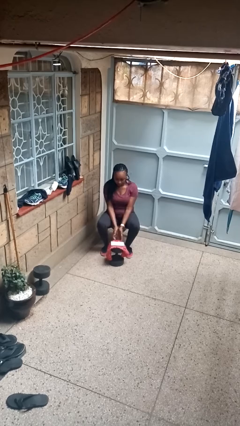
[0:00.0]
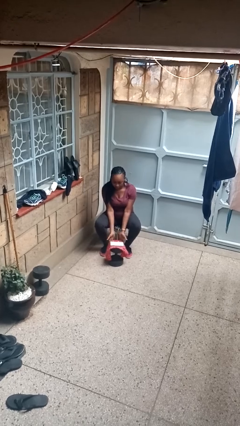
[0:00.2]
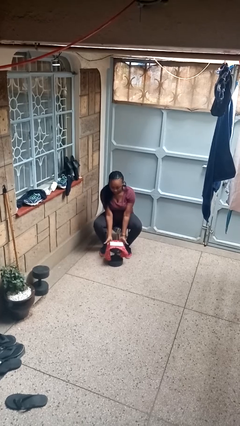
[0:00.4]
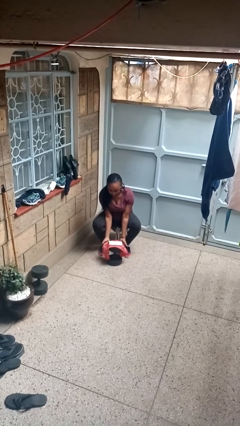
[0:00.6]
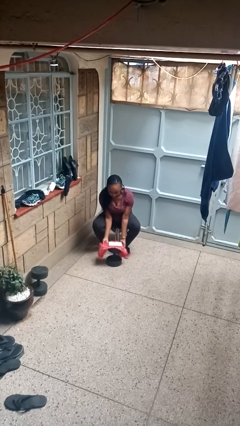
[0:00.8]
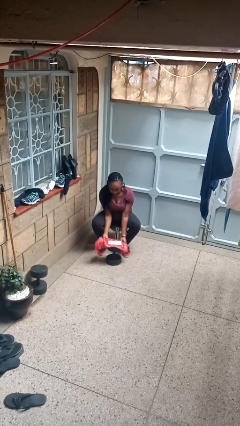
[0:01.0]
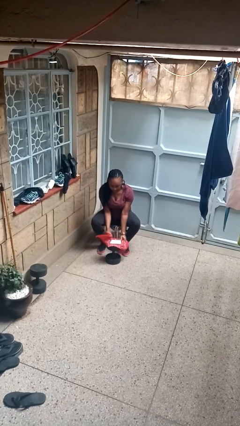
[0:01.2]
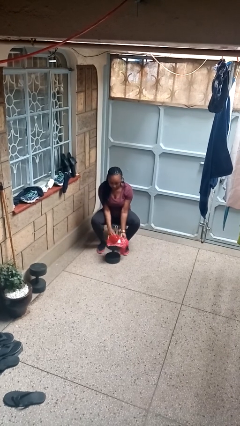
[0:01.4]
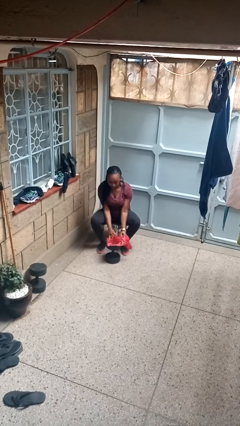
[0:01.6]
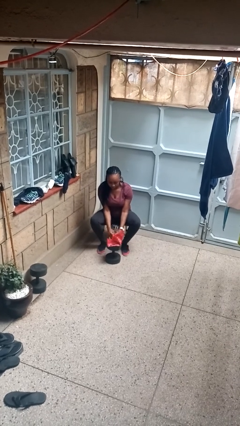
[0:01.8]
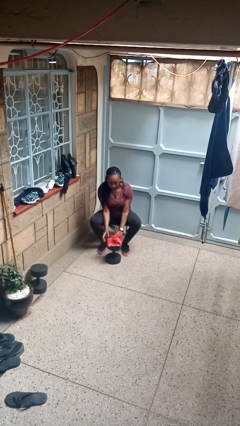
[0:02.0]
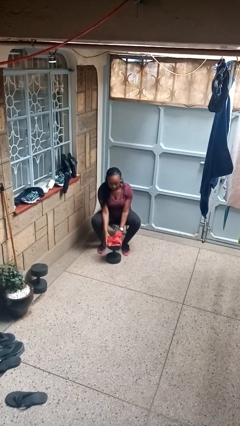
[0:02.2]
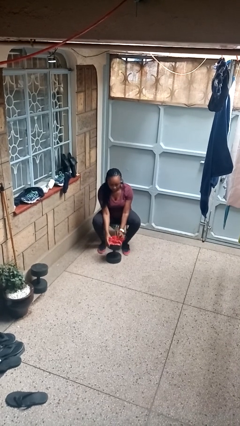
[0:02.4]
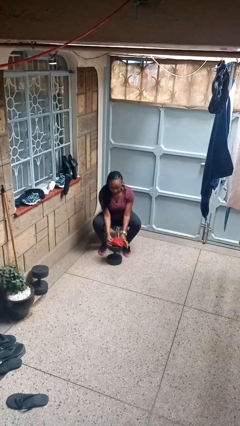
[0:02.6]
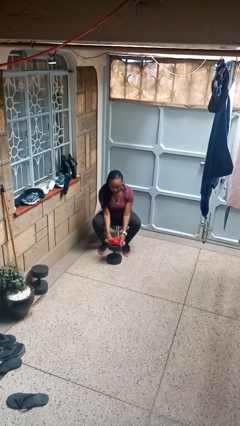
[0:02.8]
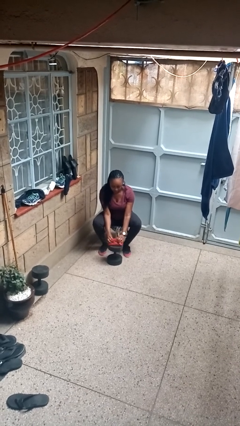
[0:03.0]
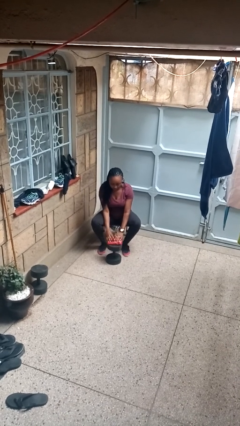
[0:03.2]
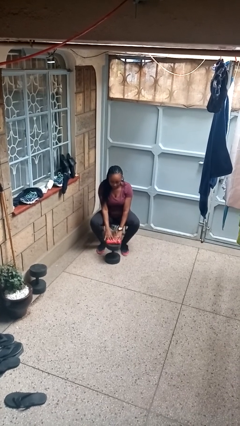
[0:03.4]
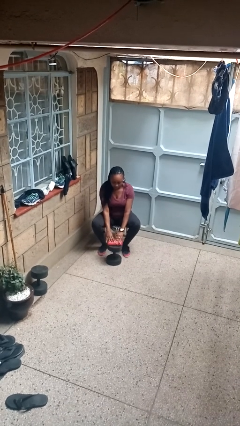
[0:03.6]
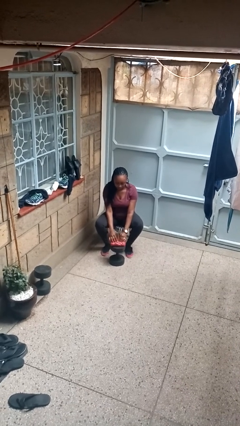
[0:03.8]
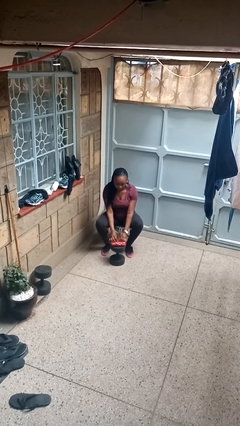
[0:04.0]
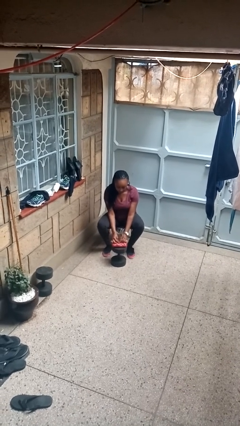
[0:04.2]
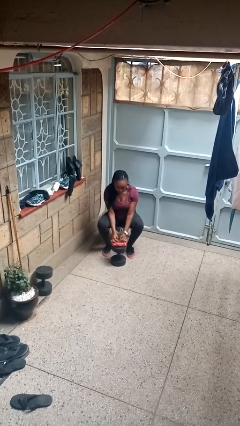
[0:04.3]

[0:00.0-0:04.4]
person wraps box

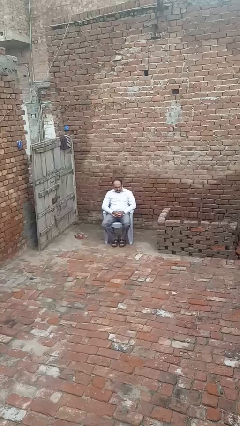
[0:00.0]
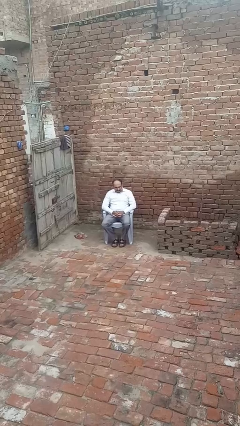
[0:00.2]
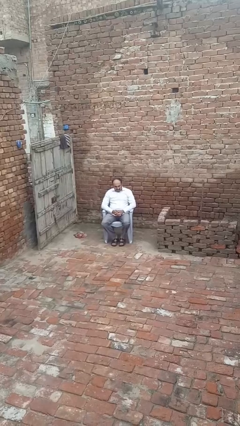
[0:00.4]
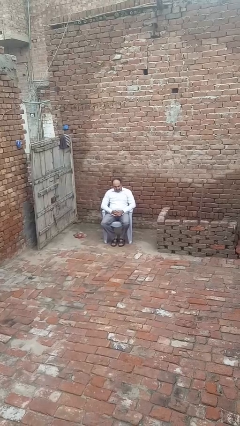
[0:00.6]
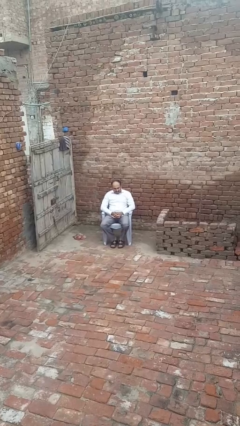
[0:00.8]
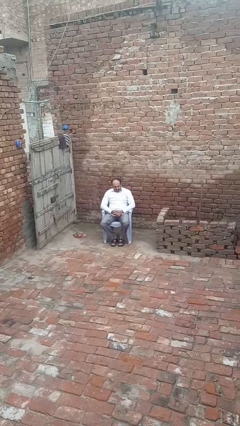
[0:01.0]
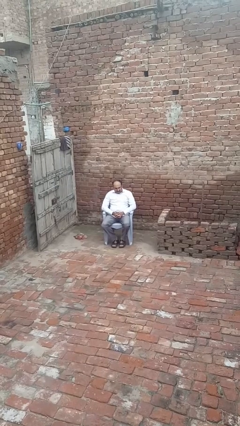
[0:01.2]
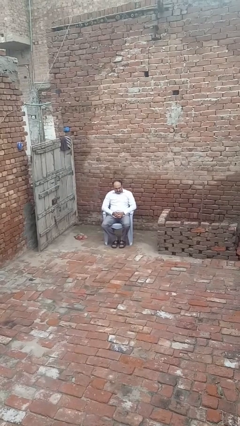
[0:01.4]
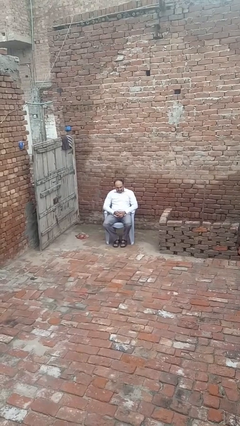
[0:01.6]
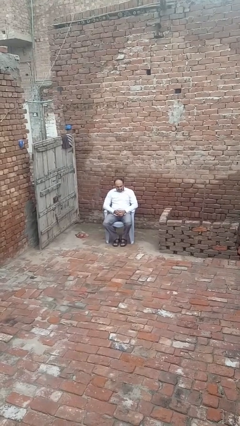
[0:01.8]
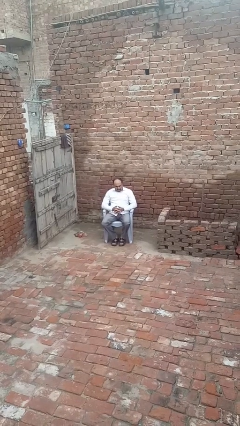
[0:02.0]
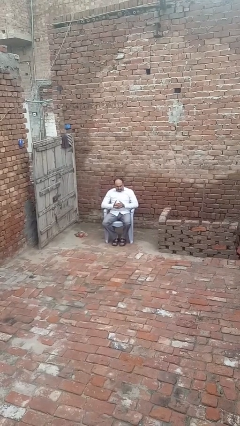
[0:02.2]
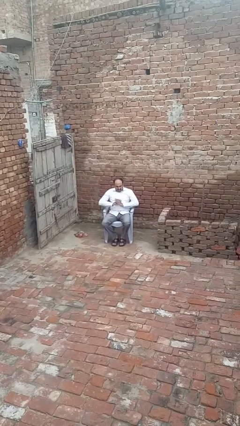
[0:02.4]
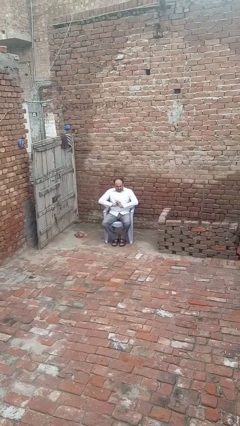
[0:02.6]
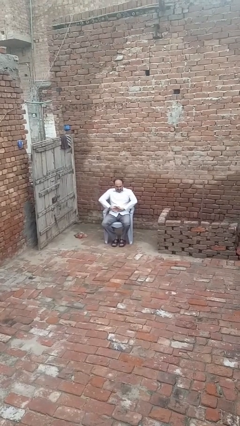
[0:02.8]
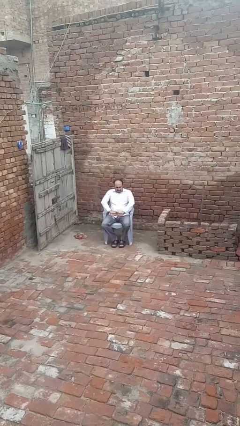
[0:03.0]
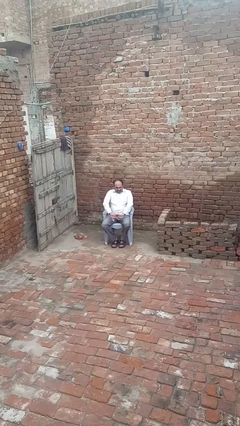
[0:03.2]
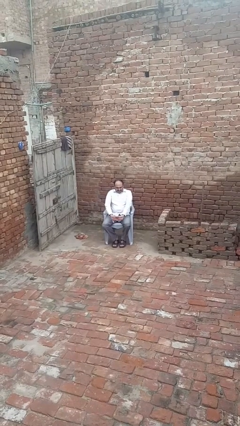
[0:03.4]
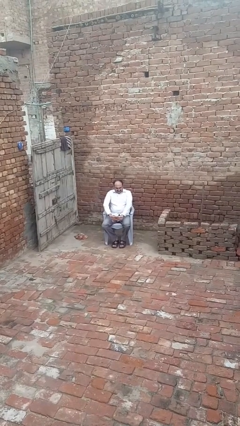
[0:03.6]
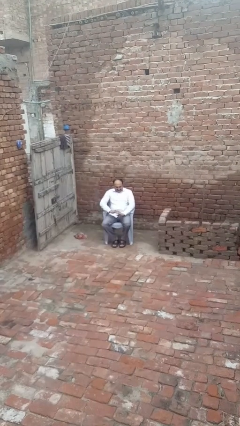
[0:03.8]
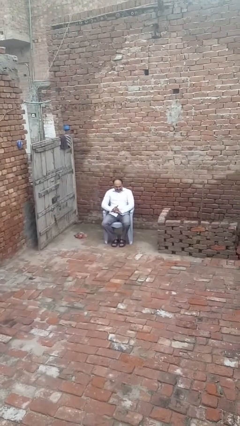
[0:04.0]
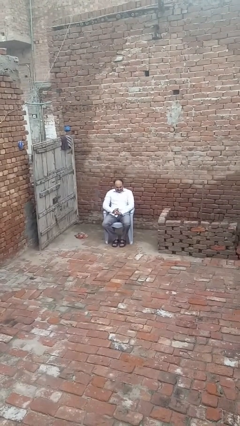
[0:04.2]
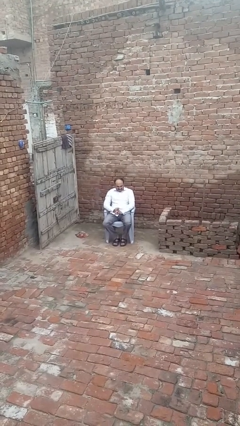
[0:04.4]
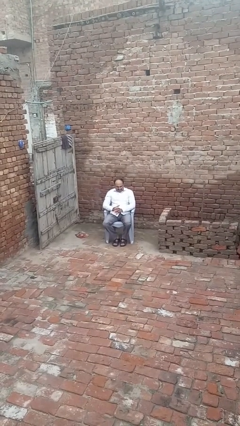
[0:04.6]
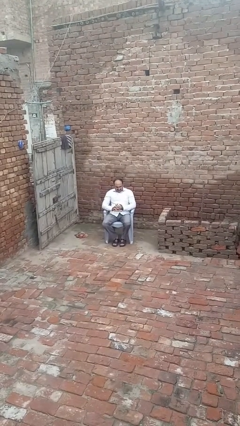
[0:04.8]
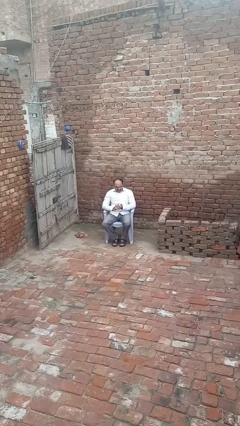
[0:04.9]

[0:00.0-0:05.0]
person cracks knuckles

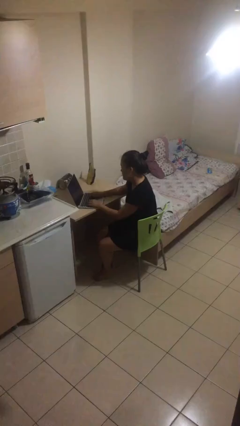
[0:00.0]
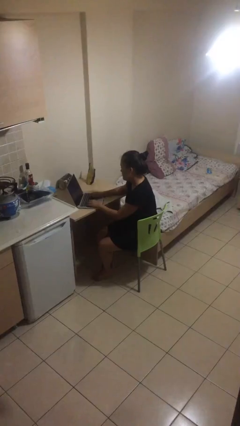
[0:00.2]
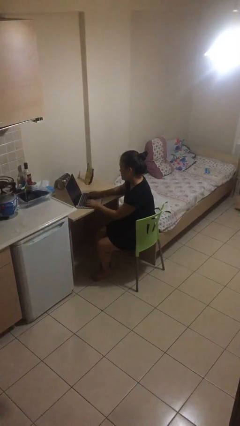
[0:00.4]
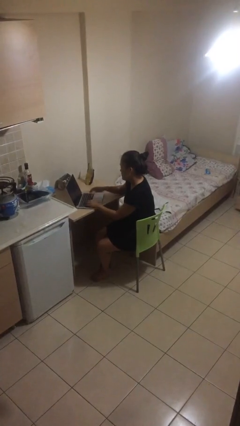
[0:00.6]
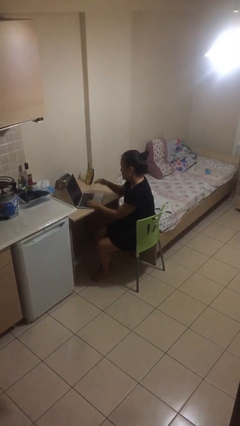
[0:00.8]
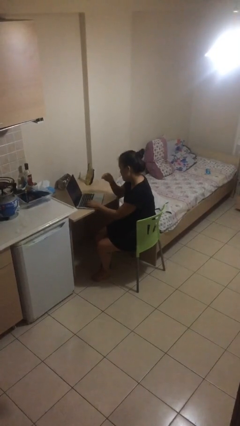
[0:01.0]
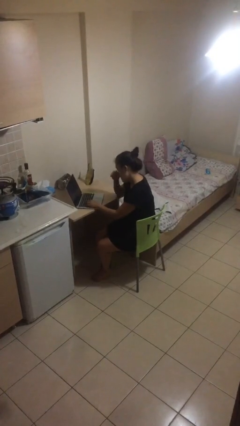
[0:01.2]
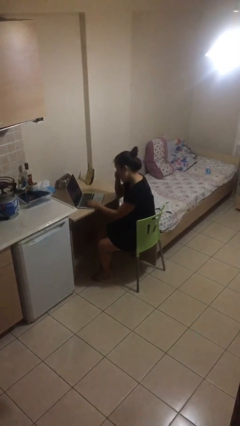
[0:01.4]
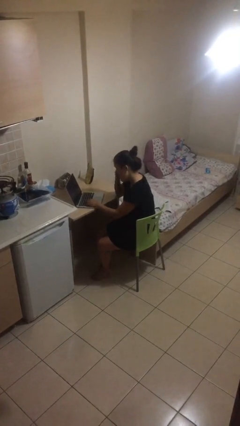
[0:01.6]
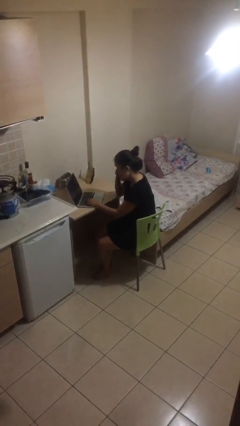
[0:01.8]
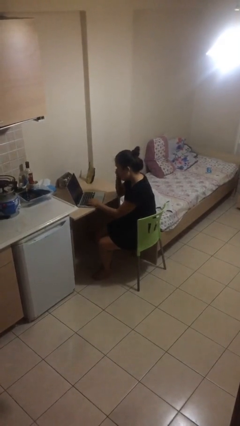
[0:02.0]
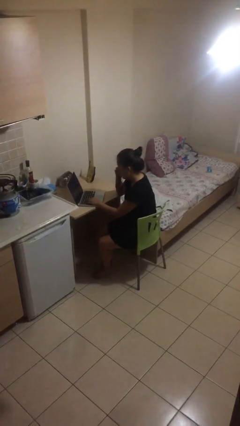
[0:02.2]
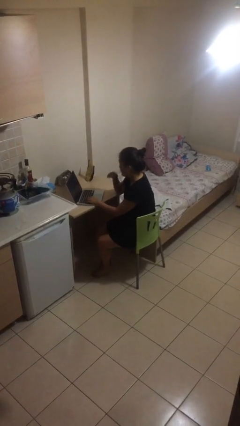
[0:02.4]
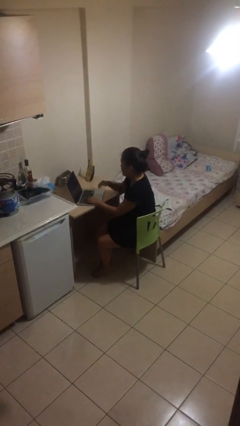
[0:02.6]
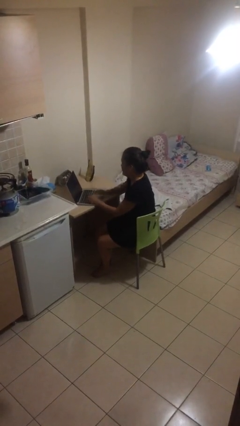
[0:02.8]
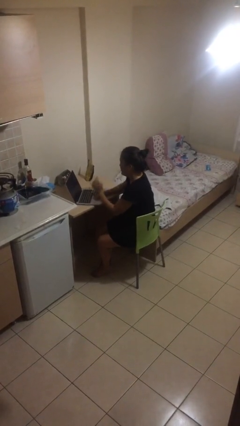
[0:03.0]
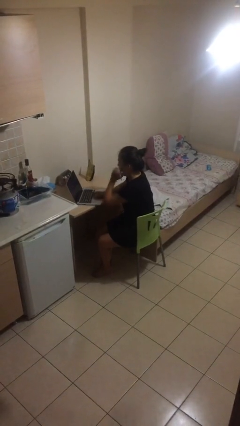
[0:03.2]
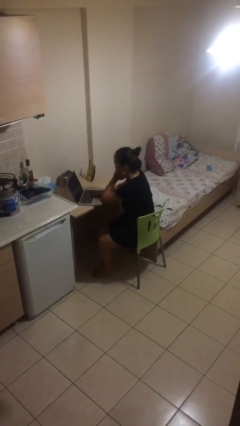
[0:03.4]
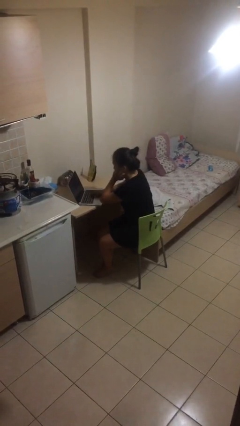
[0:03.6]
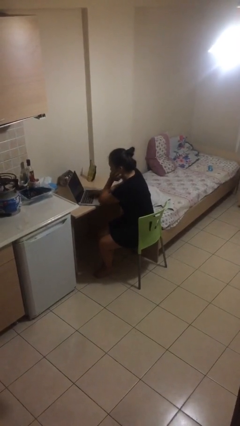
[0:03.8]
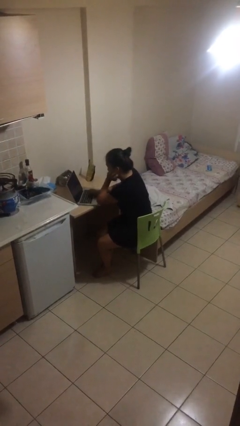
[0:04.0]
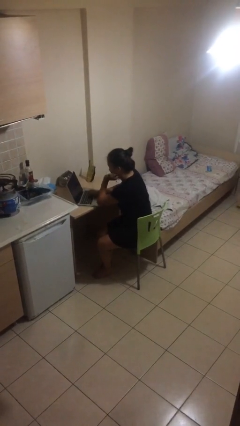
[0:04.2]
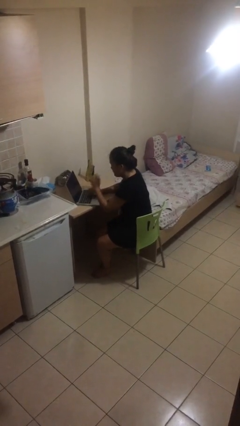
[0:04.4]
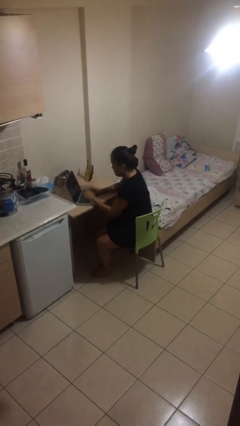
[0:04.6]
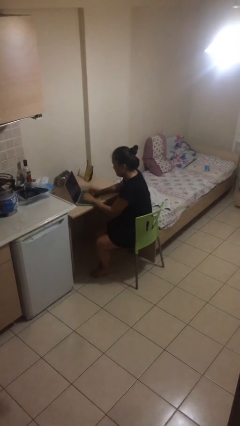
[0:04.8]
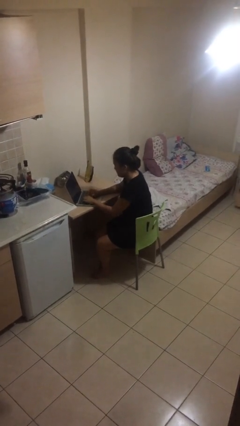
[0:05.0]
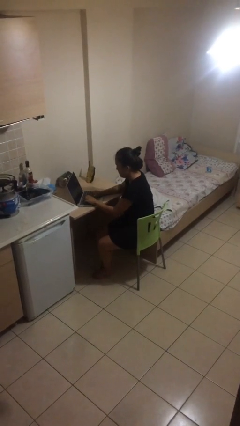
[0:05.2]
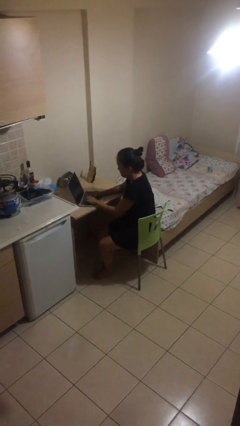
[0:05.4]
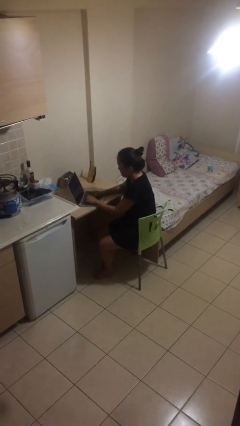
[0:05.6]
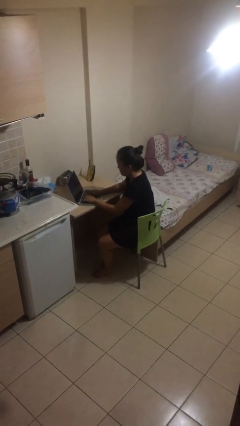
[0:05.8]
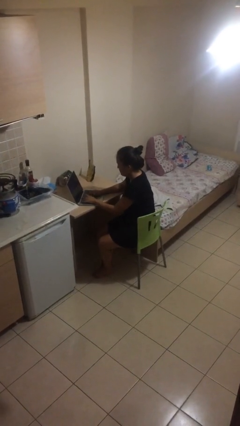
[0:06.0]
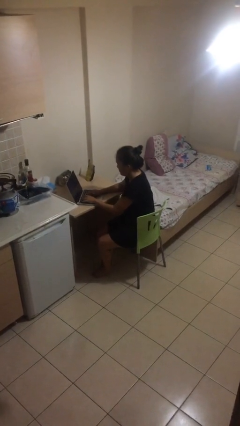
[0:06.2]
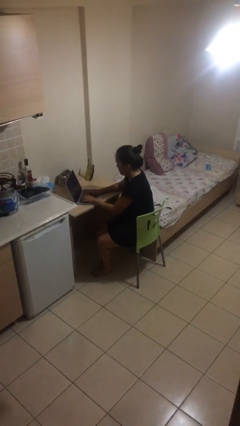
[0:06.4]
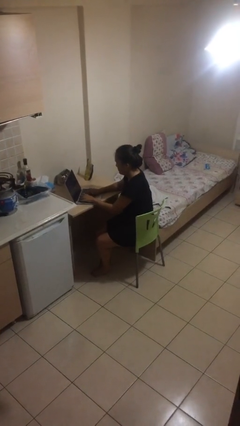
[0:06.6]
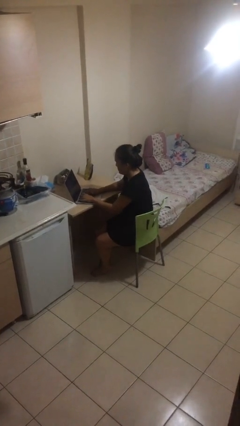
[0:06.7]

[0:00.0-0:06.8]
person interacts with laptop

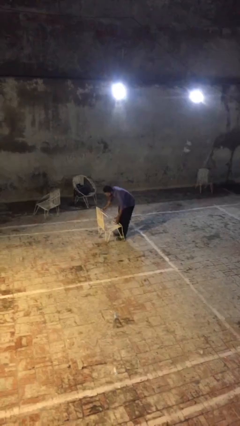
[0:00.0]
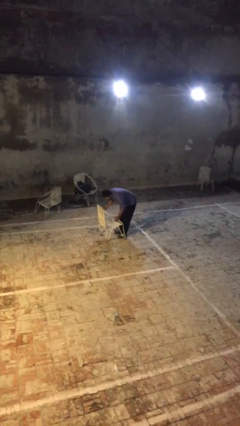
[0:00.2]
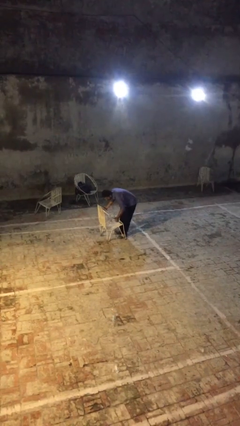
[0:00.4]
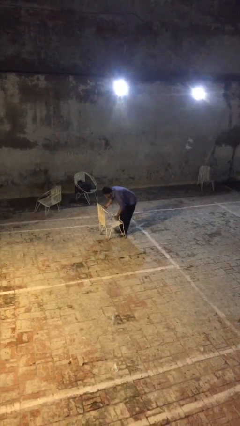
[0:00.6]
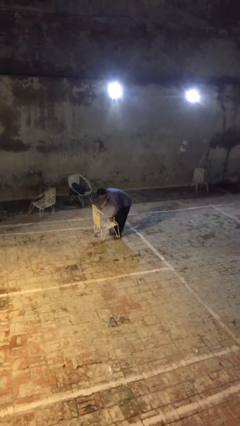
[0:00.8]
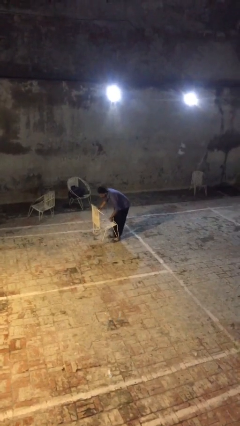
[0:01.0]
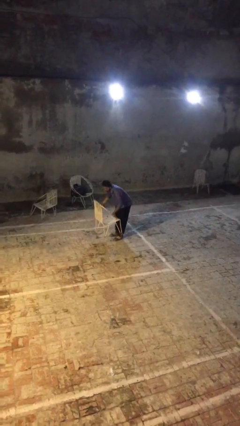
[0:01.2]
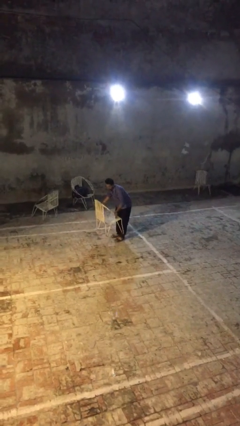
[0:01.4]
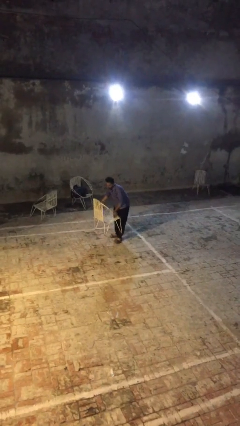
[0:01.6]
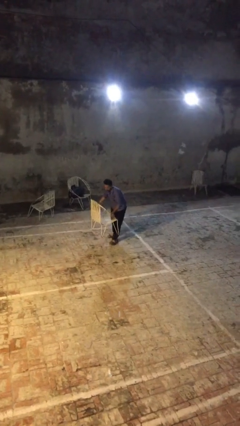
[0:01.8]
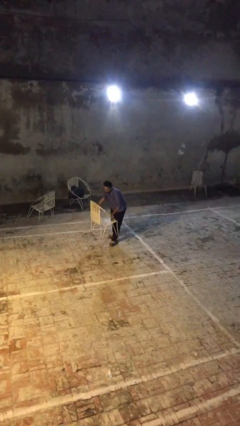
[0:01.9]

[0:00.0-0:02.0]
person picks up object from floor
